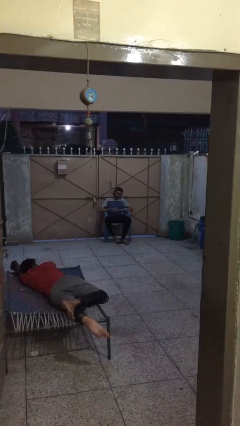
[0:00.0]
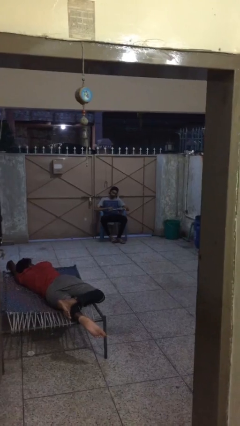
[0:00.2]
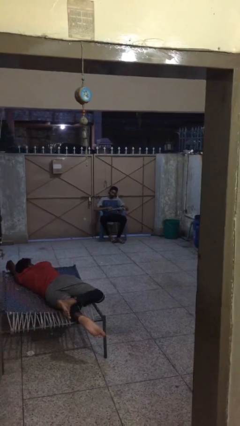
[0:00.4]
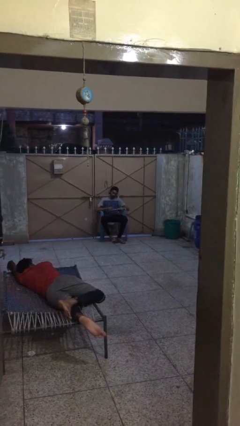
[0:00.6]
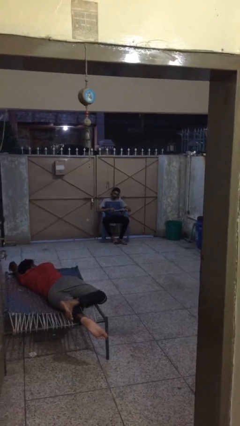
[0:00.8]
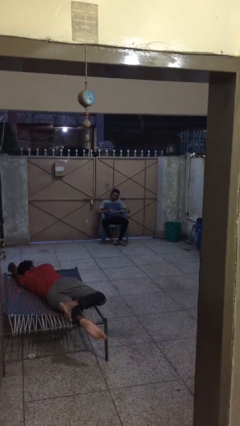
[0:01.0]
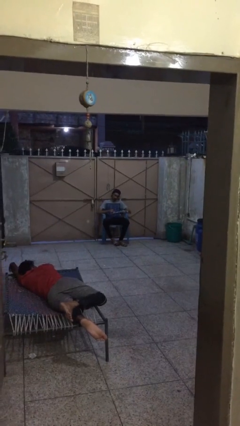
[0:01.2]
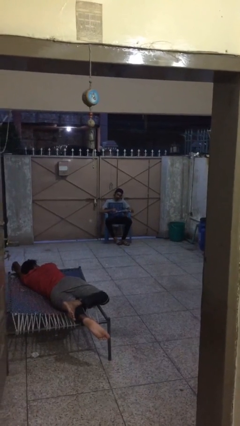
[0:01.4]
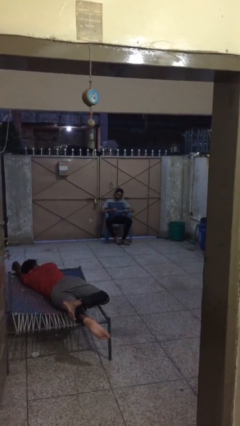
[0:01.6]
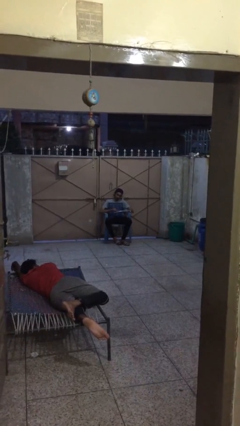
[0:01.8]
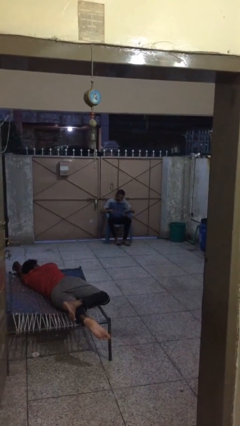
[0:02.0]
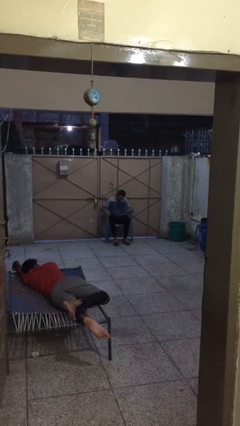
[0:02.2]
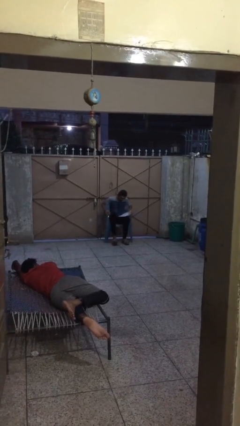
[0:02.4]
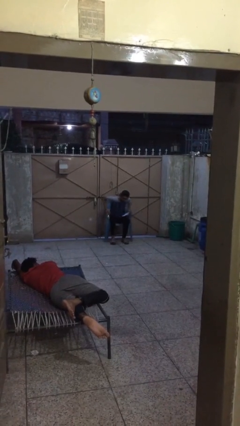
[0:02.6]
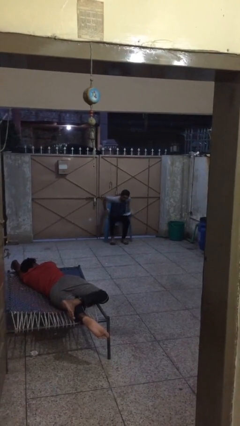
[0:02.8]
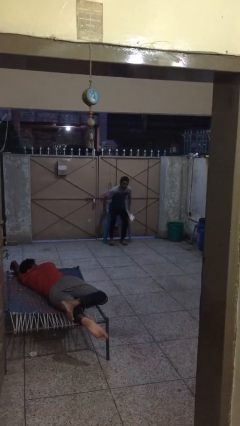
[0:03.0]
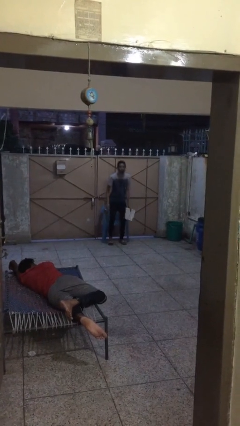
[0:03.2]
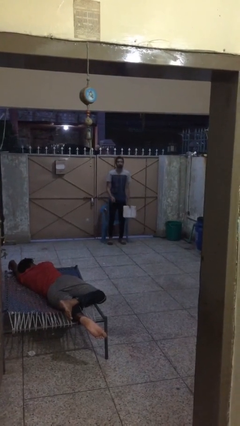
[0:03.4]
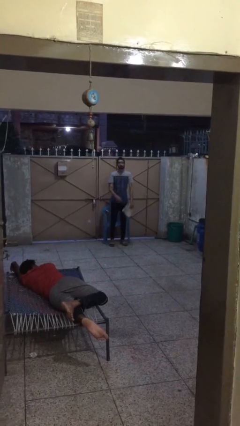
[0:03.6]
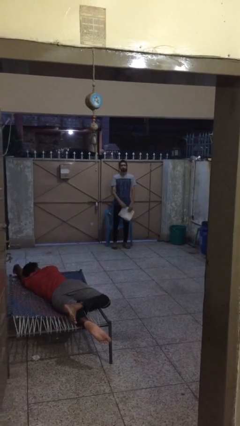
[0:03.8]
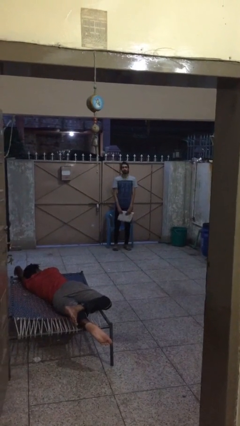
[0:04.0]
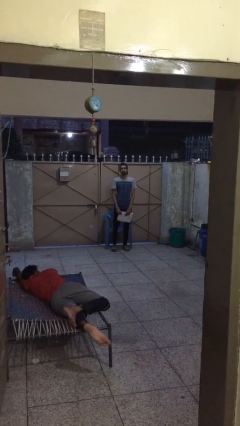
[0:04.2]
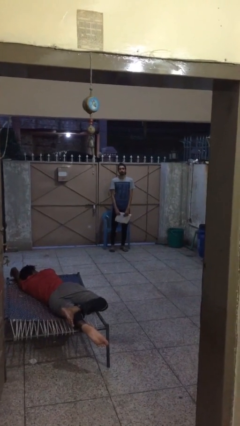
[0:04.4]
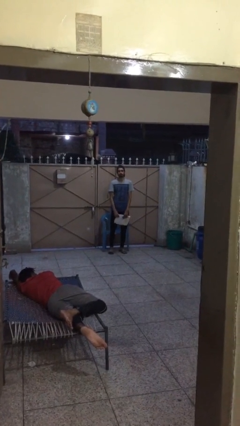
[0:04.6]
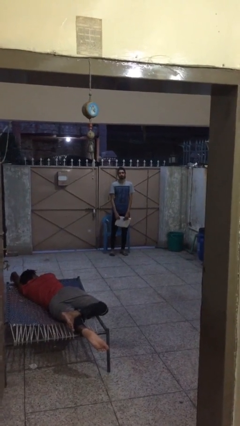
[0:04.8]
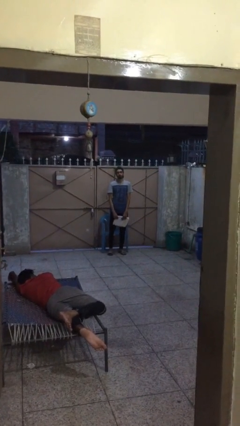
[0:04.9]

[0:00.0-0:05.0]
person stands up

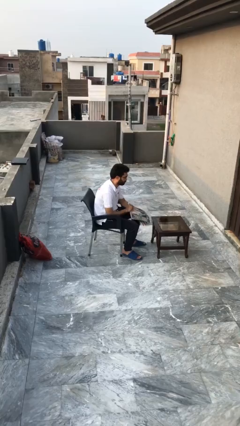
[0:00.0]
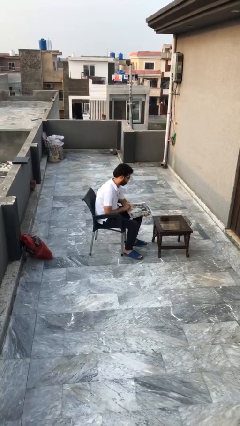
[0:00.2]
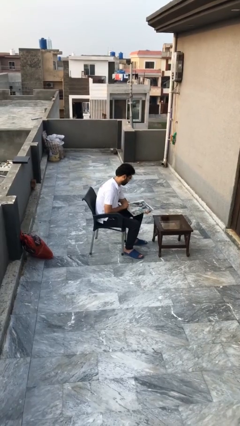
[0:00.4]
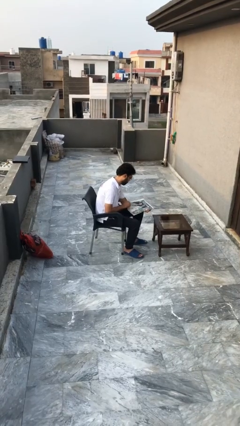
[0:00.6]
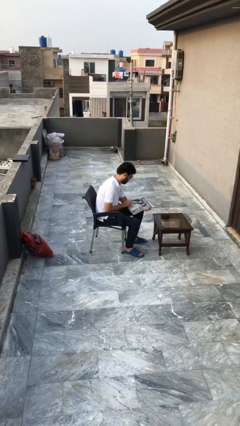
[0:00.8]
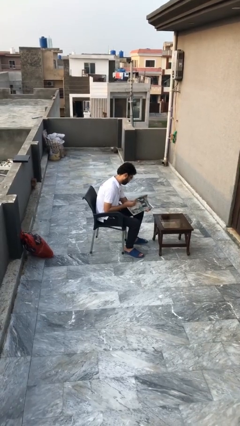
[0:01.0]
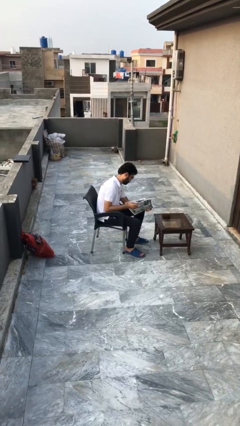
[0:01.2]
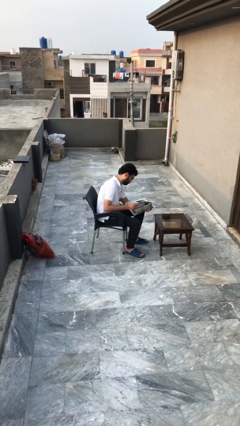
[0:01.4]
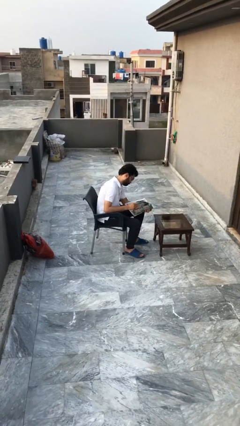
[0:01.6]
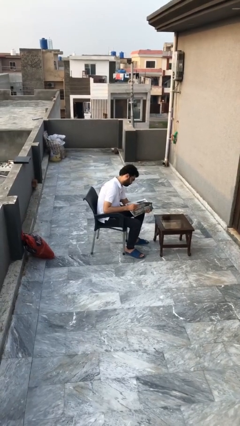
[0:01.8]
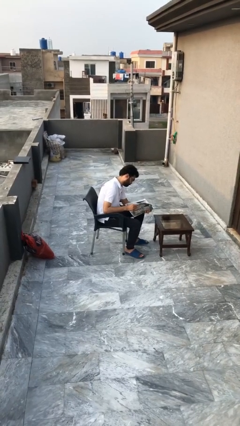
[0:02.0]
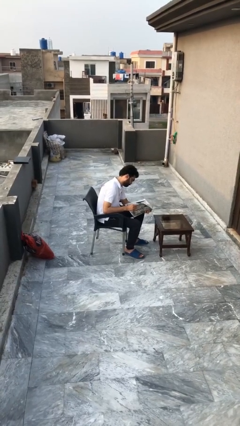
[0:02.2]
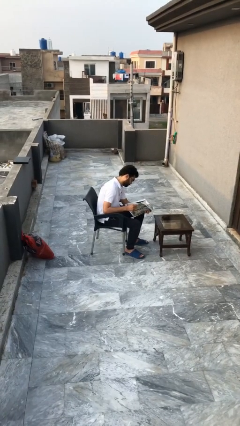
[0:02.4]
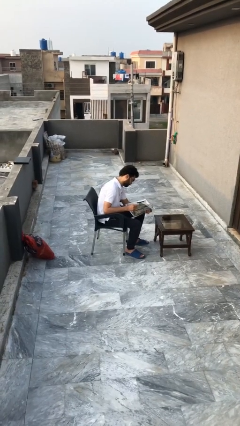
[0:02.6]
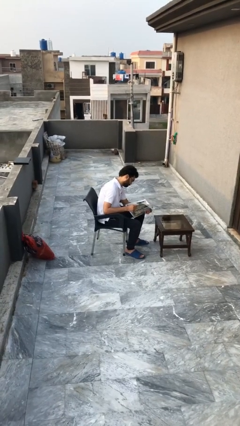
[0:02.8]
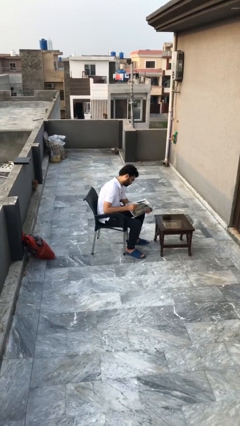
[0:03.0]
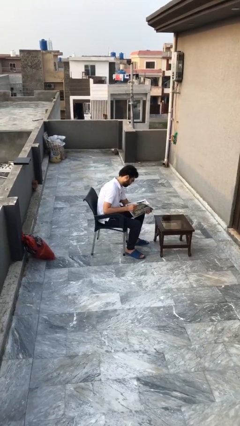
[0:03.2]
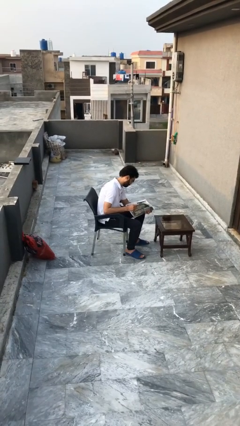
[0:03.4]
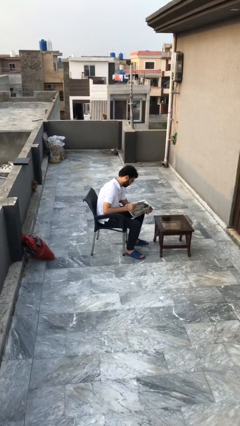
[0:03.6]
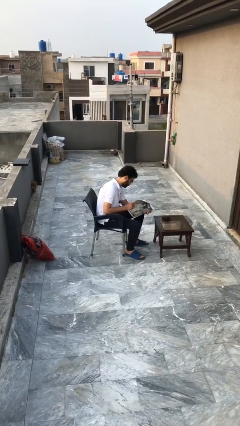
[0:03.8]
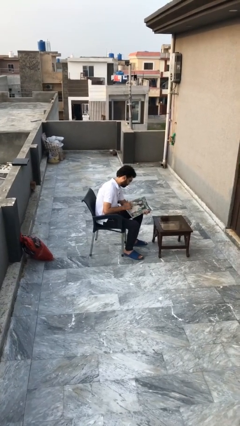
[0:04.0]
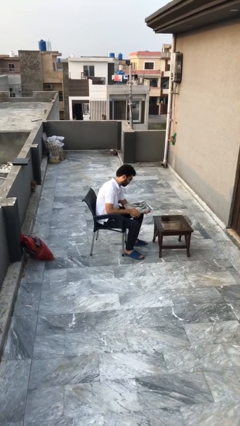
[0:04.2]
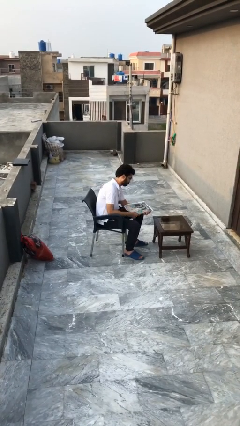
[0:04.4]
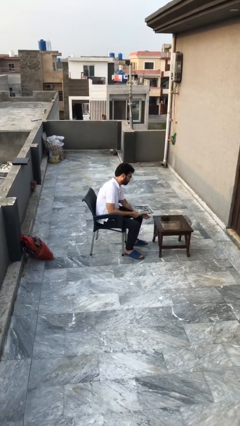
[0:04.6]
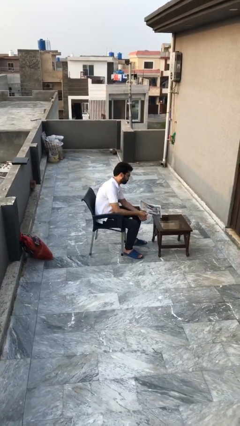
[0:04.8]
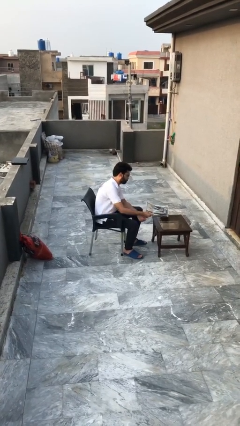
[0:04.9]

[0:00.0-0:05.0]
person reads document

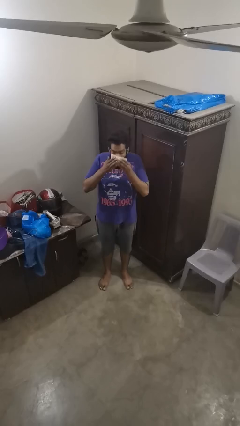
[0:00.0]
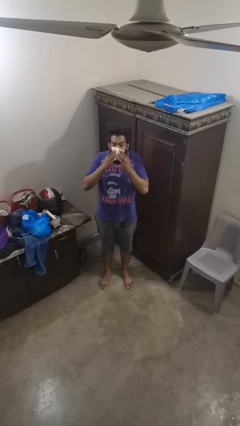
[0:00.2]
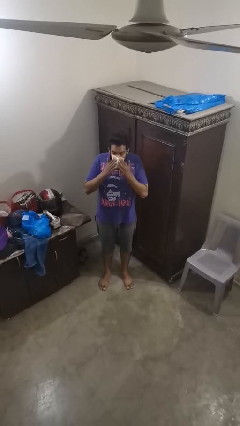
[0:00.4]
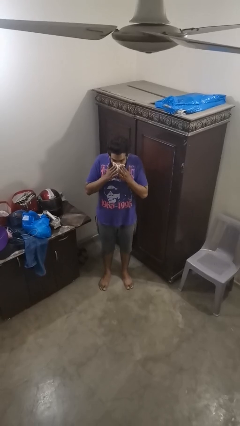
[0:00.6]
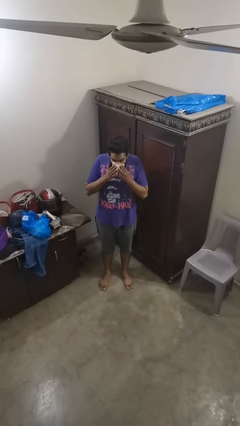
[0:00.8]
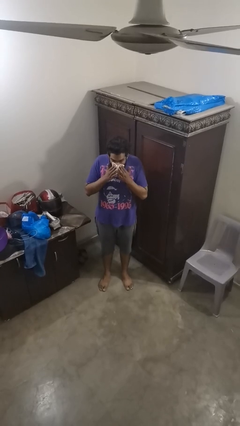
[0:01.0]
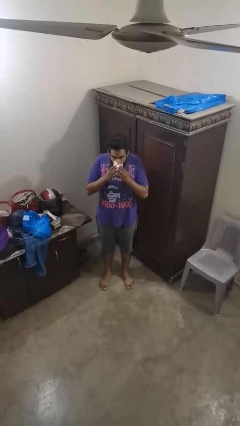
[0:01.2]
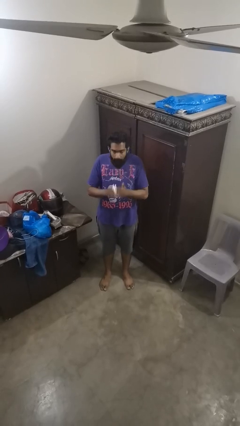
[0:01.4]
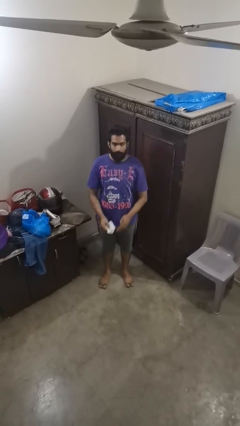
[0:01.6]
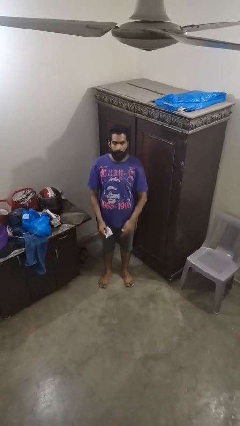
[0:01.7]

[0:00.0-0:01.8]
person blows nose

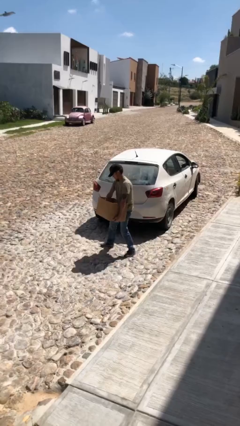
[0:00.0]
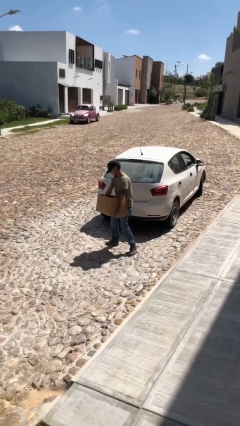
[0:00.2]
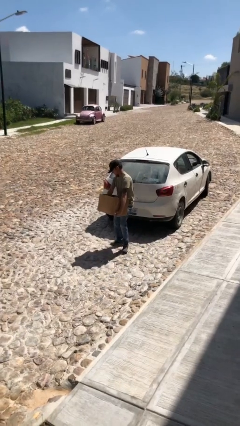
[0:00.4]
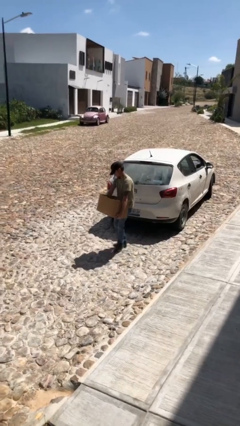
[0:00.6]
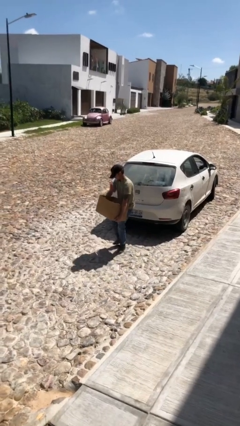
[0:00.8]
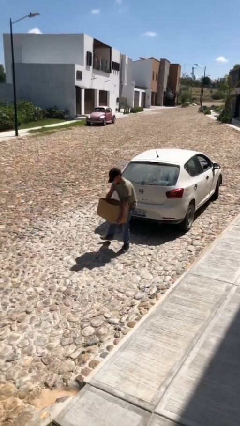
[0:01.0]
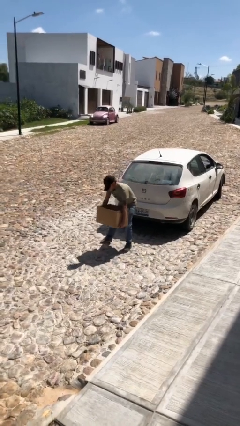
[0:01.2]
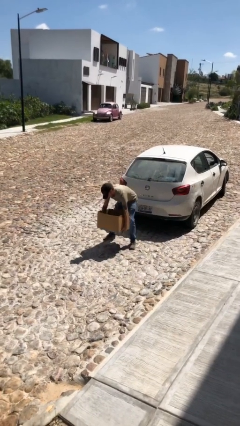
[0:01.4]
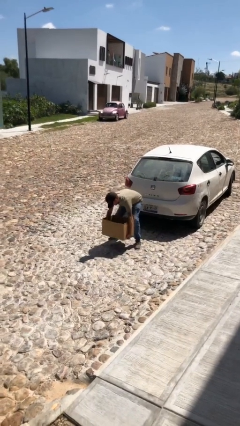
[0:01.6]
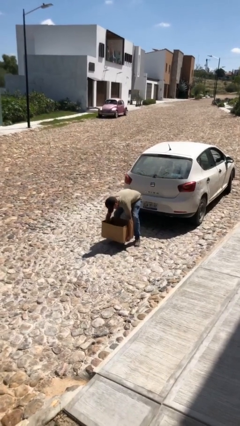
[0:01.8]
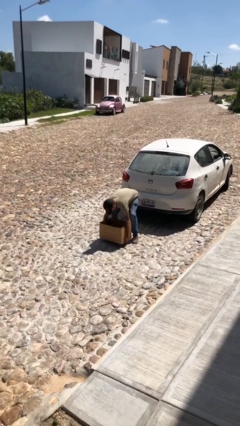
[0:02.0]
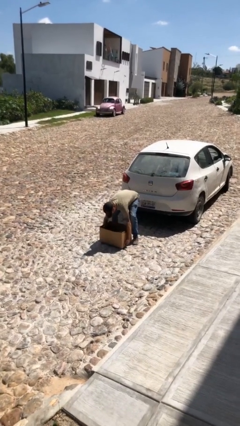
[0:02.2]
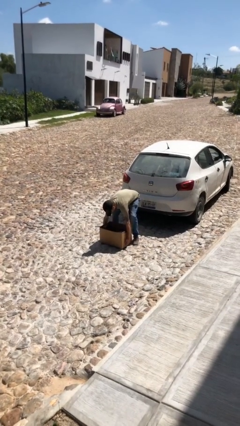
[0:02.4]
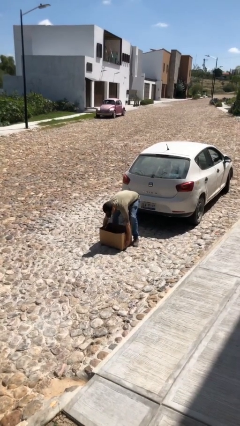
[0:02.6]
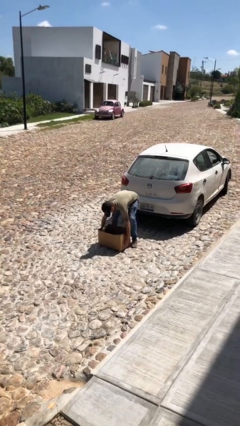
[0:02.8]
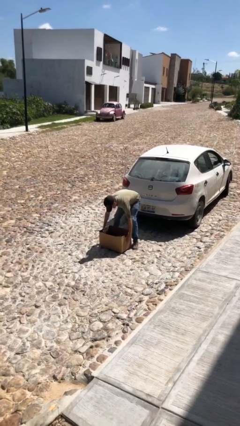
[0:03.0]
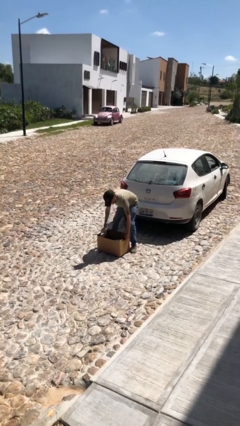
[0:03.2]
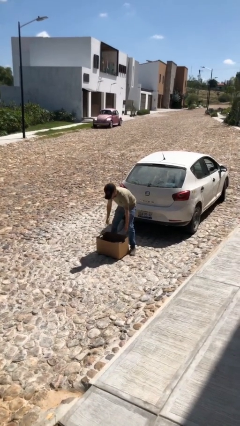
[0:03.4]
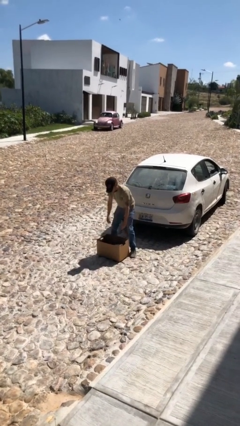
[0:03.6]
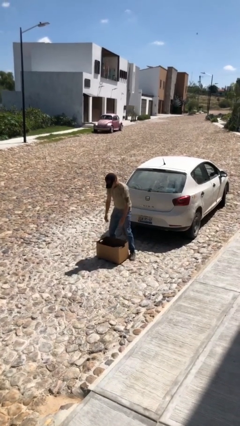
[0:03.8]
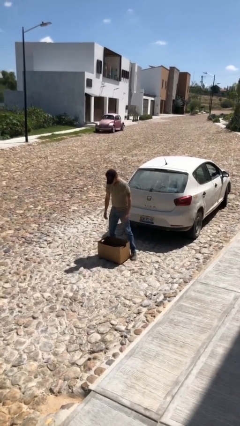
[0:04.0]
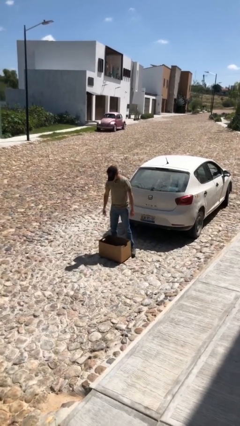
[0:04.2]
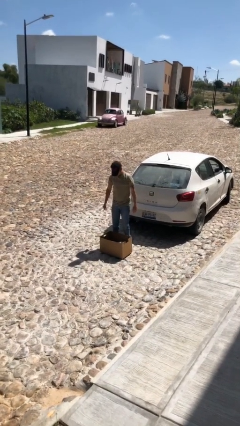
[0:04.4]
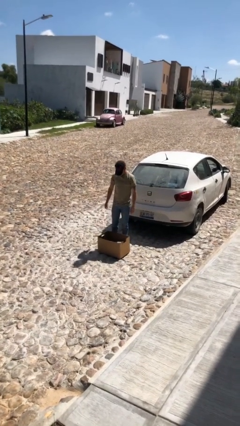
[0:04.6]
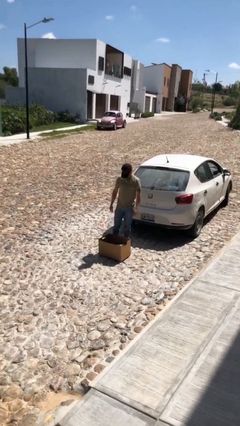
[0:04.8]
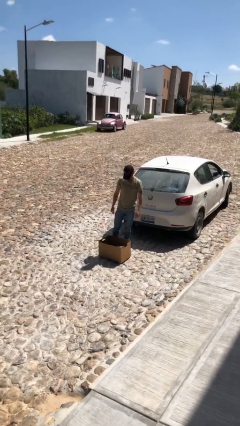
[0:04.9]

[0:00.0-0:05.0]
person puts down object on floor

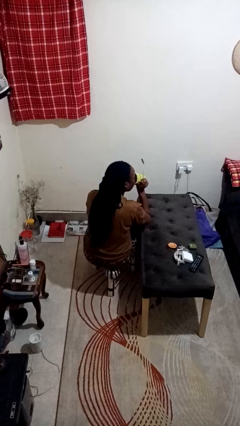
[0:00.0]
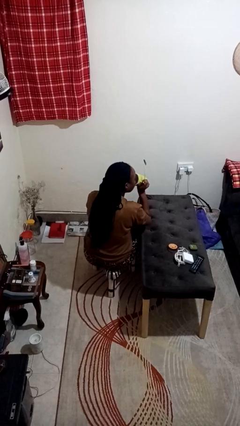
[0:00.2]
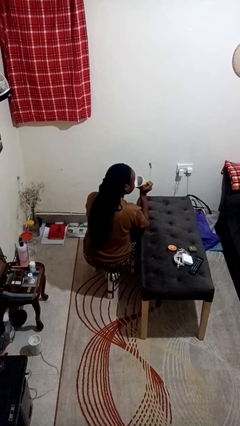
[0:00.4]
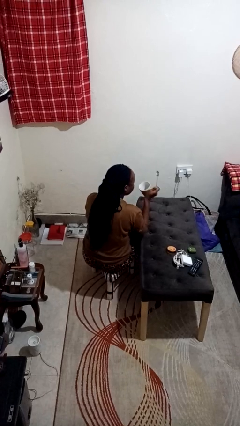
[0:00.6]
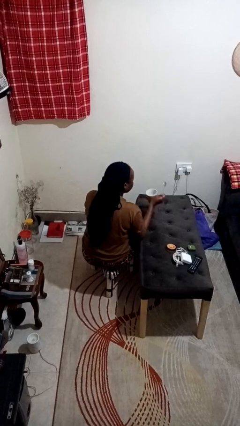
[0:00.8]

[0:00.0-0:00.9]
person drinks from mug

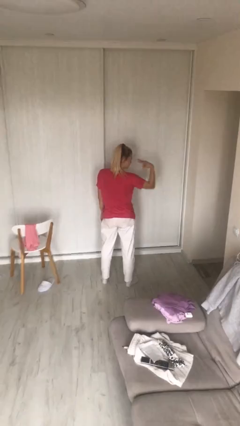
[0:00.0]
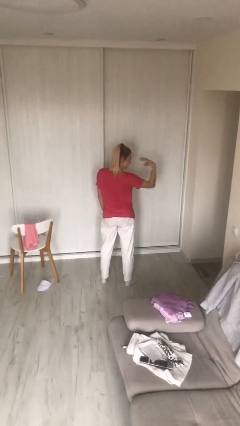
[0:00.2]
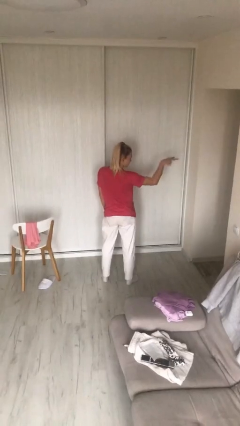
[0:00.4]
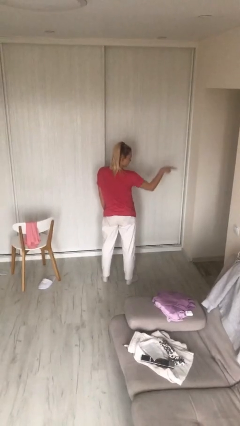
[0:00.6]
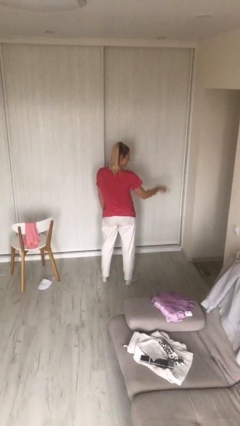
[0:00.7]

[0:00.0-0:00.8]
person gestures watch closely
